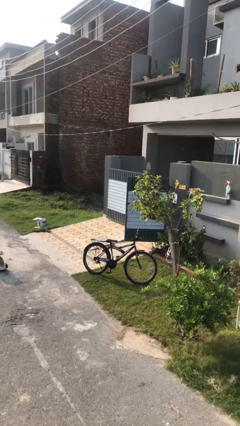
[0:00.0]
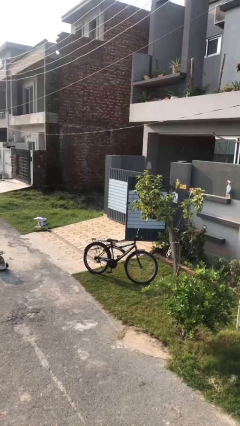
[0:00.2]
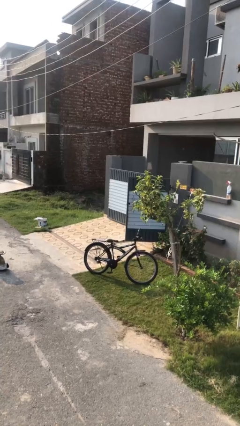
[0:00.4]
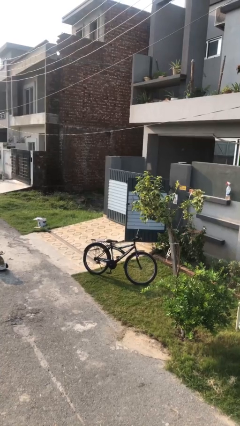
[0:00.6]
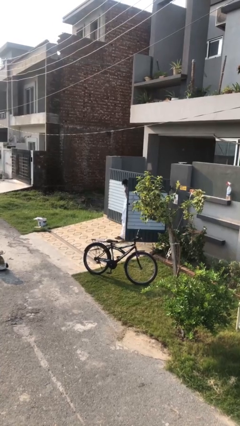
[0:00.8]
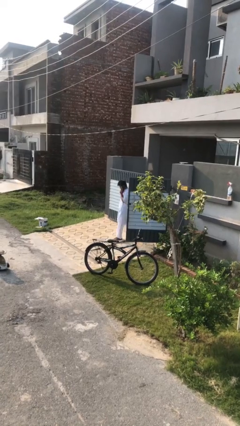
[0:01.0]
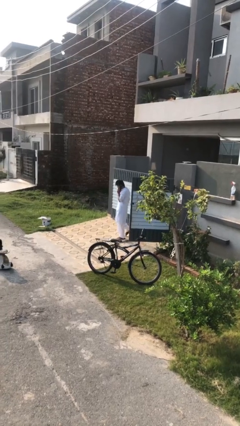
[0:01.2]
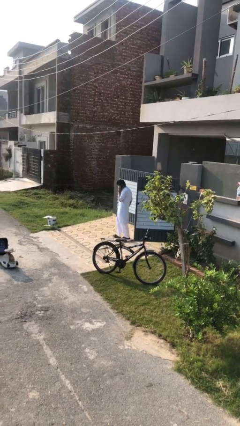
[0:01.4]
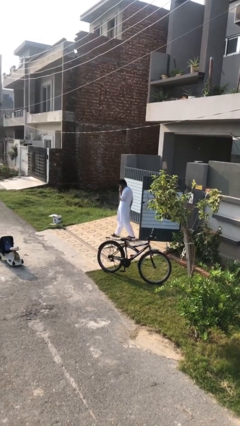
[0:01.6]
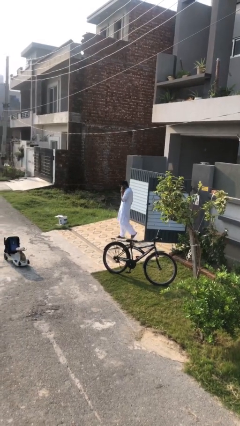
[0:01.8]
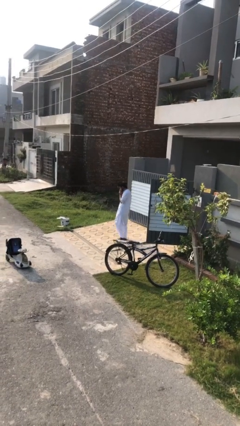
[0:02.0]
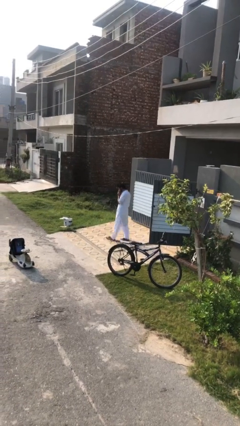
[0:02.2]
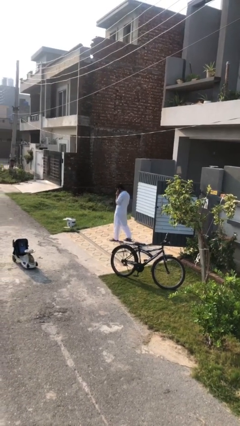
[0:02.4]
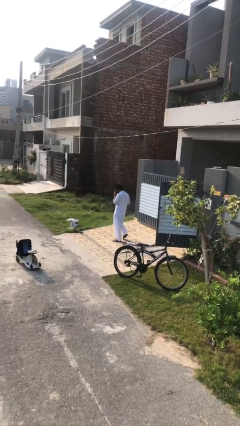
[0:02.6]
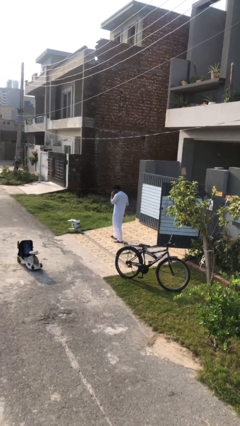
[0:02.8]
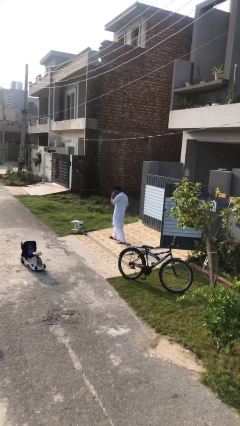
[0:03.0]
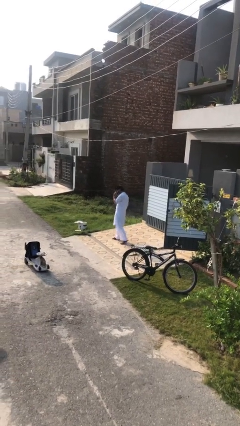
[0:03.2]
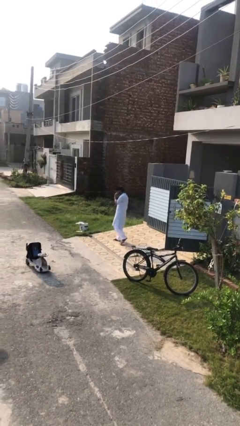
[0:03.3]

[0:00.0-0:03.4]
person enters scene through structure

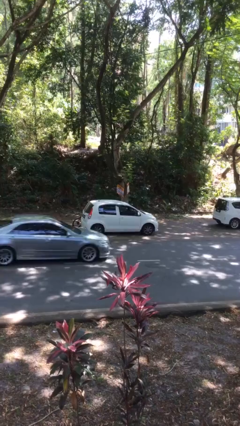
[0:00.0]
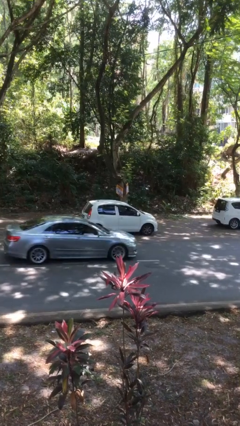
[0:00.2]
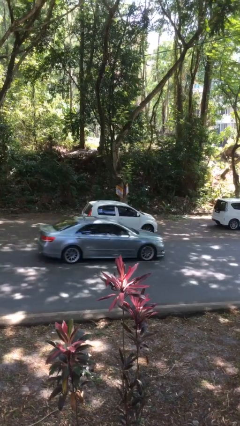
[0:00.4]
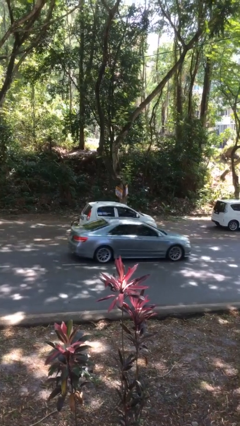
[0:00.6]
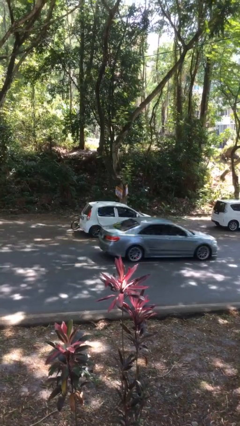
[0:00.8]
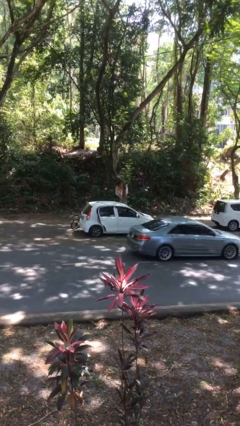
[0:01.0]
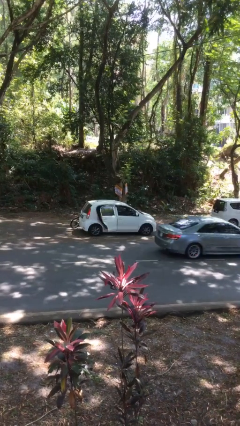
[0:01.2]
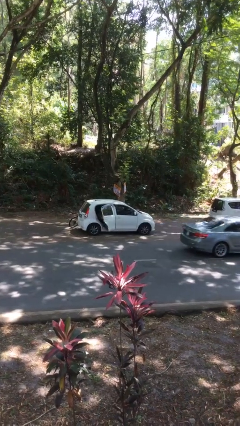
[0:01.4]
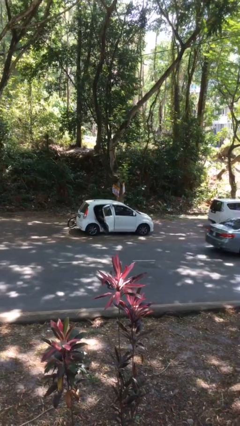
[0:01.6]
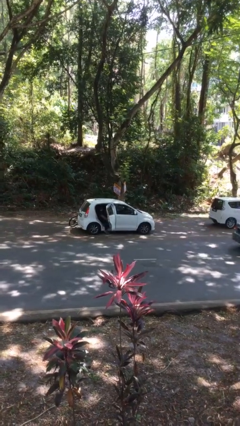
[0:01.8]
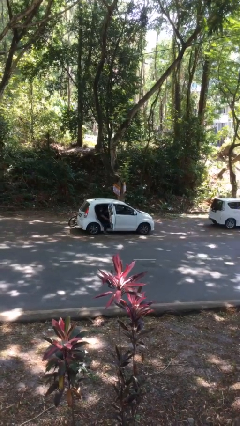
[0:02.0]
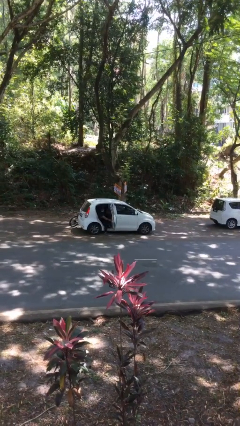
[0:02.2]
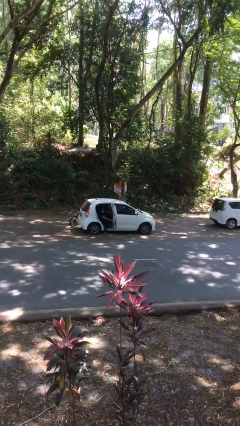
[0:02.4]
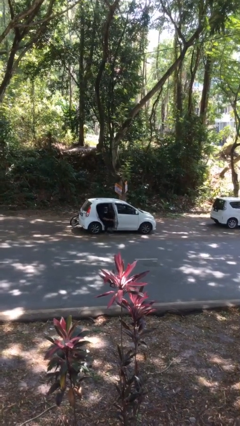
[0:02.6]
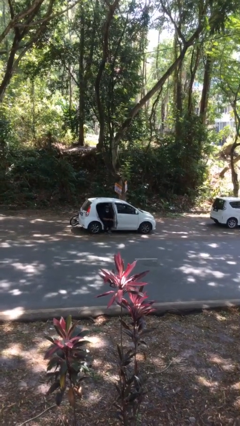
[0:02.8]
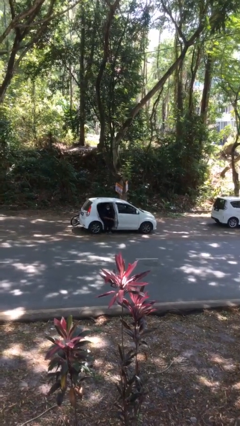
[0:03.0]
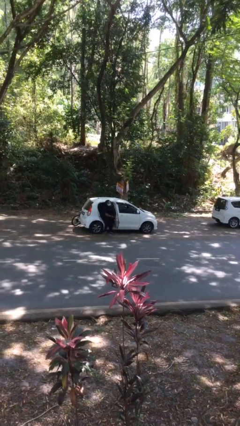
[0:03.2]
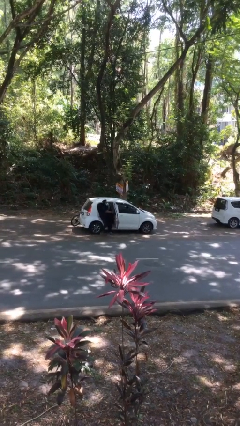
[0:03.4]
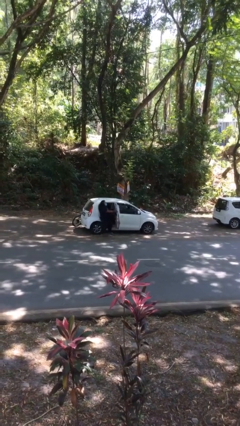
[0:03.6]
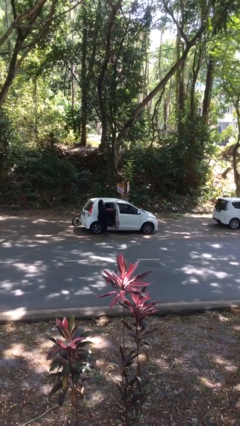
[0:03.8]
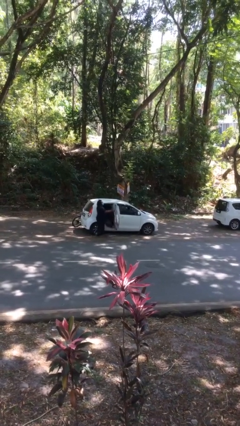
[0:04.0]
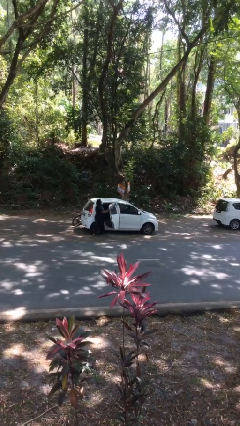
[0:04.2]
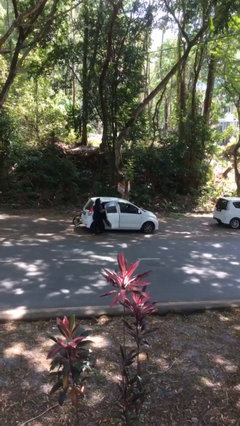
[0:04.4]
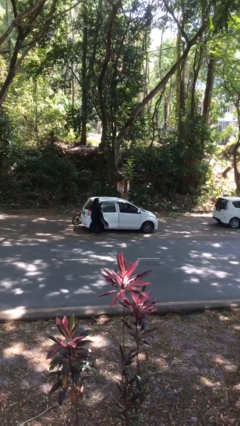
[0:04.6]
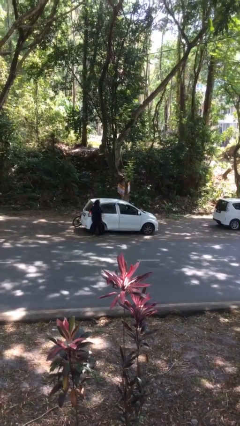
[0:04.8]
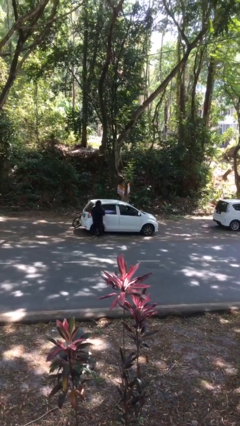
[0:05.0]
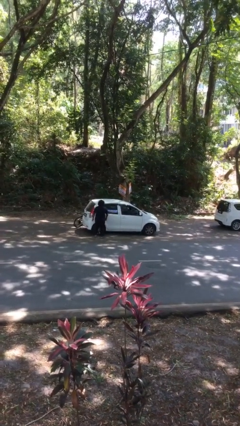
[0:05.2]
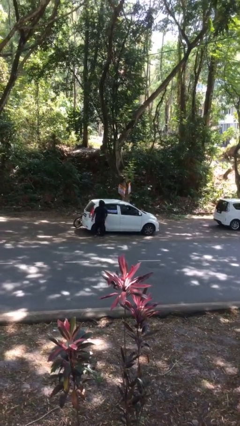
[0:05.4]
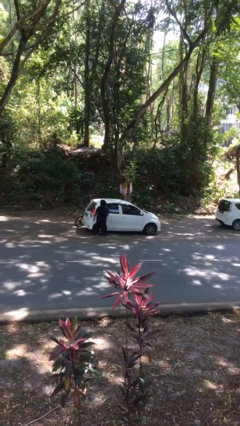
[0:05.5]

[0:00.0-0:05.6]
car drops off person

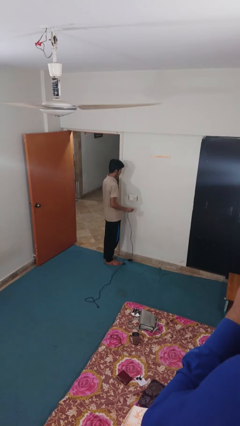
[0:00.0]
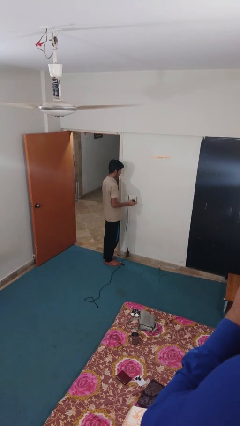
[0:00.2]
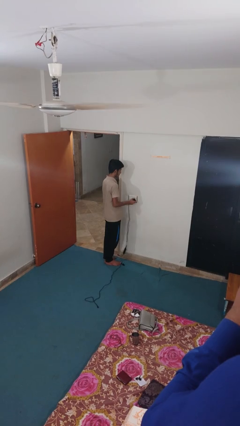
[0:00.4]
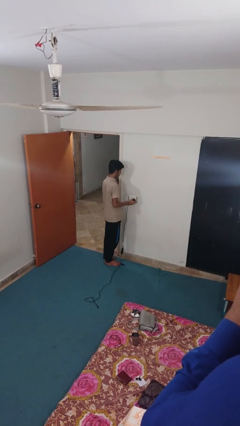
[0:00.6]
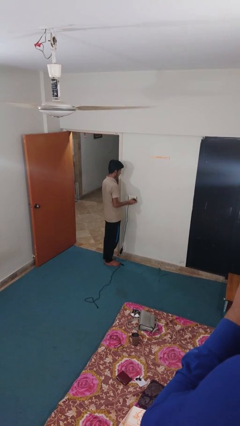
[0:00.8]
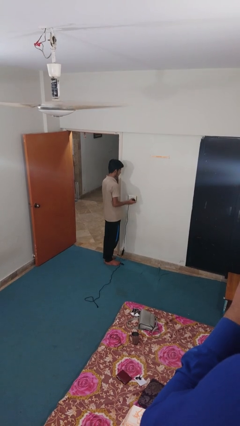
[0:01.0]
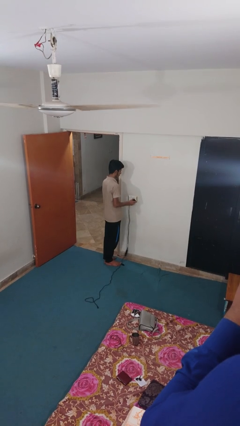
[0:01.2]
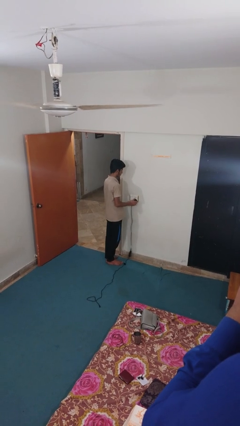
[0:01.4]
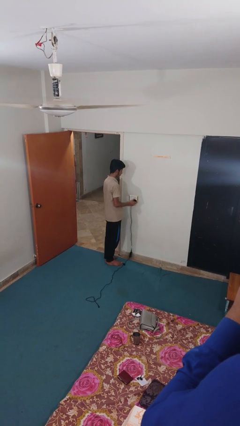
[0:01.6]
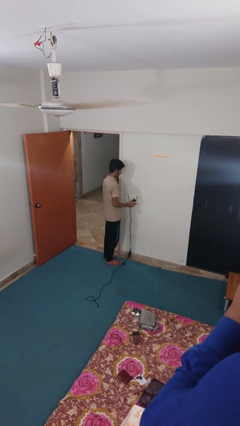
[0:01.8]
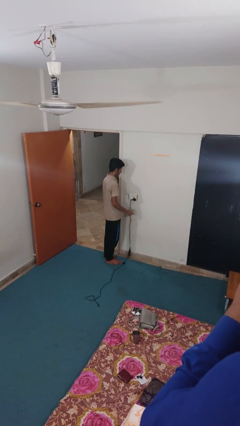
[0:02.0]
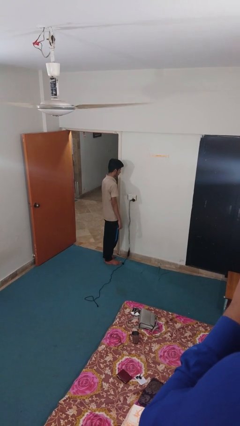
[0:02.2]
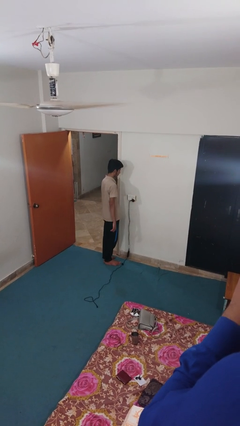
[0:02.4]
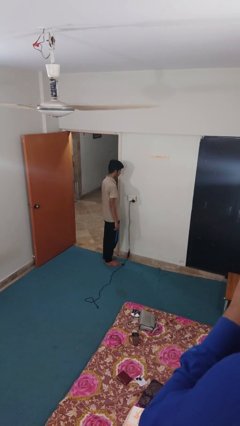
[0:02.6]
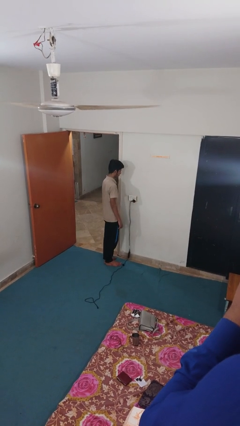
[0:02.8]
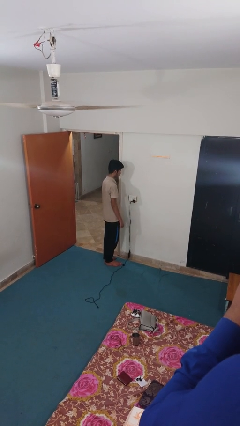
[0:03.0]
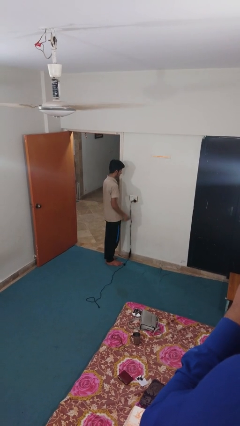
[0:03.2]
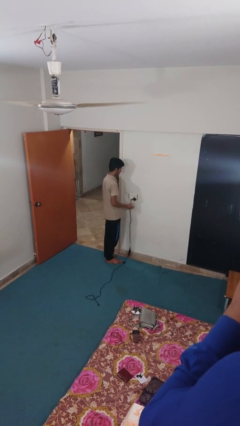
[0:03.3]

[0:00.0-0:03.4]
person plugs into electrical socket

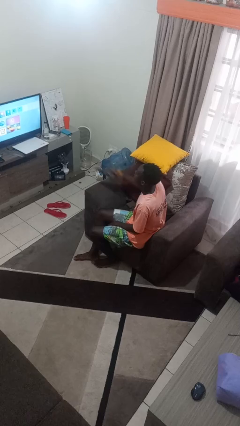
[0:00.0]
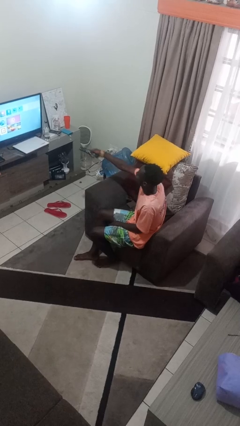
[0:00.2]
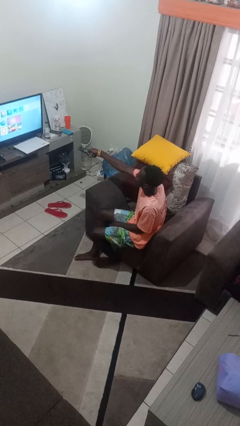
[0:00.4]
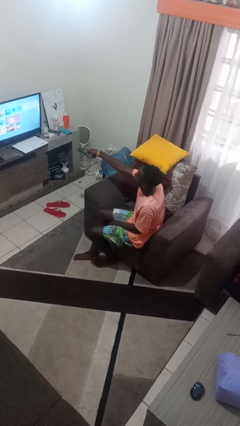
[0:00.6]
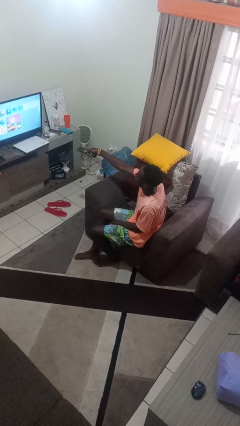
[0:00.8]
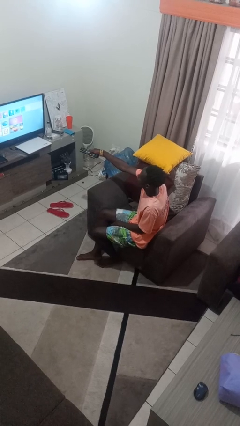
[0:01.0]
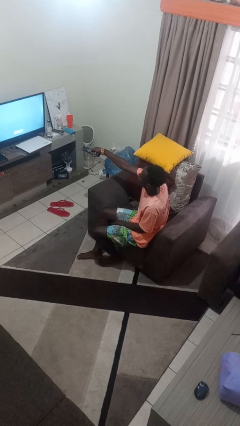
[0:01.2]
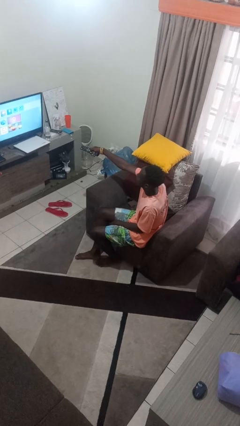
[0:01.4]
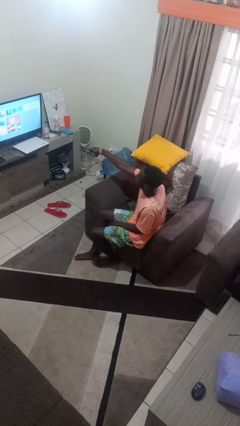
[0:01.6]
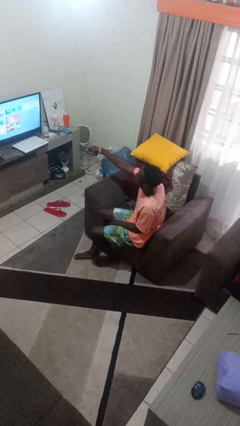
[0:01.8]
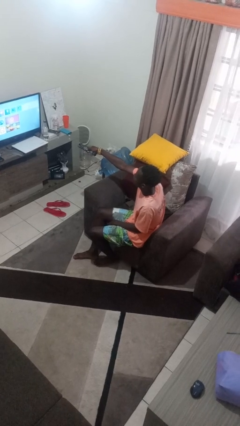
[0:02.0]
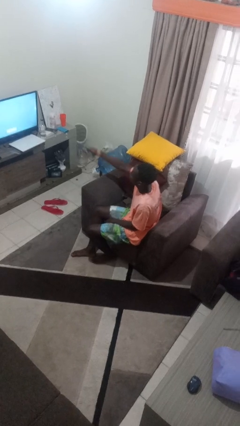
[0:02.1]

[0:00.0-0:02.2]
person uses television remote

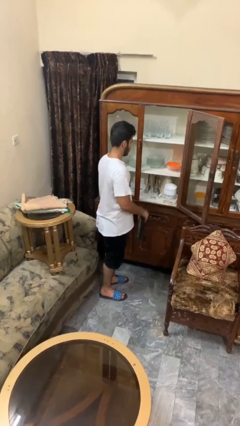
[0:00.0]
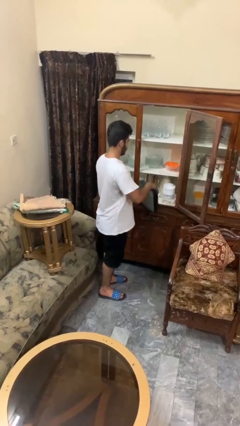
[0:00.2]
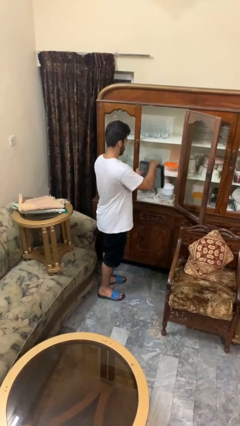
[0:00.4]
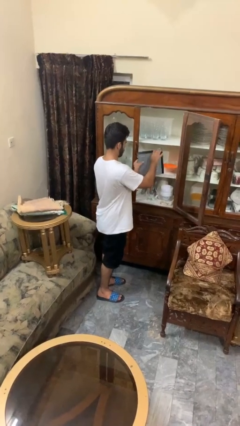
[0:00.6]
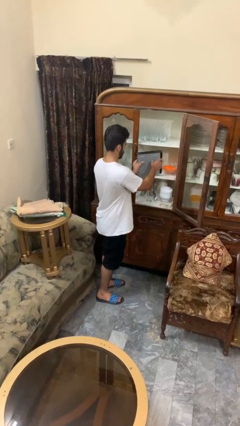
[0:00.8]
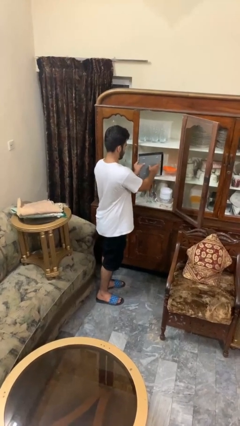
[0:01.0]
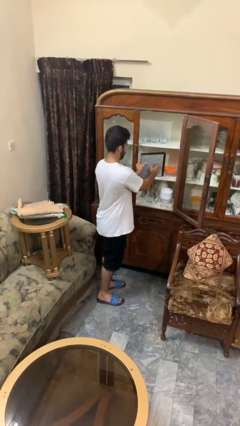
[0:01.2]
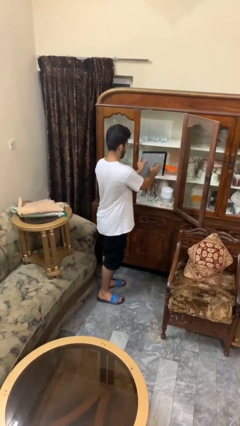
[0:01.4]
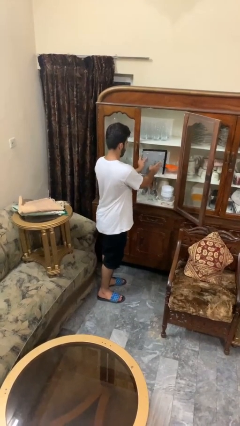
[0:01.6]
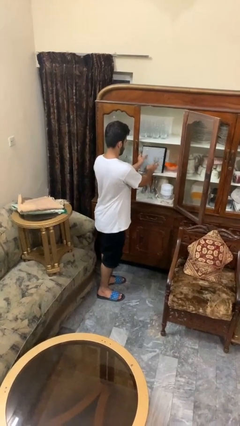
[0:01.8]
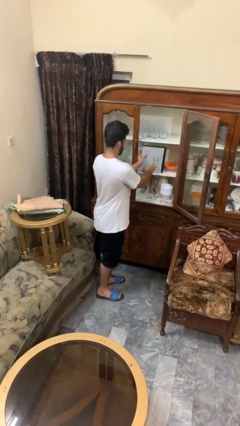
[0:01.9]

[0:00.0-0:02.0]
person puts down object into cabinet

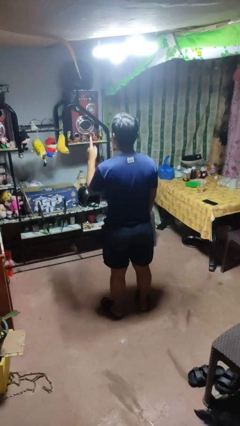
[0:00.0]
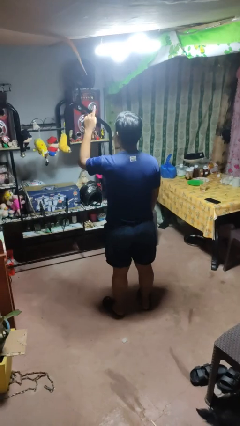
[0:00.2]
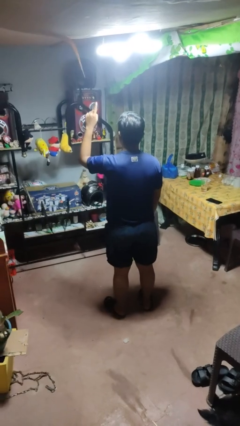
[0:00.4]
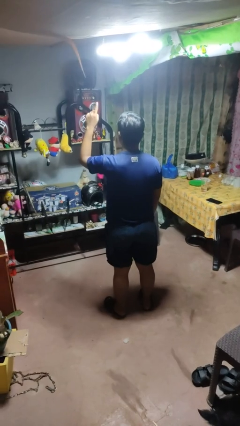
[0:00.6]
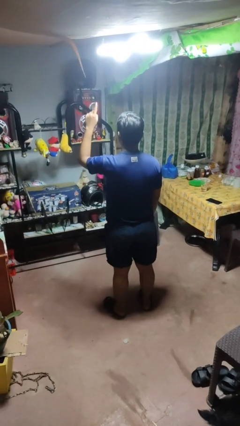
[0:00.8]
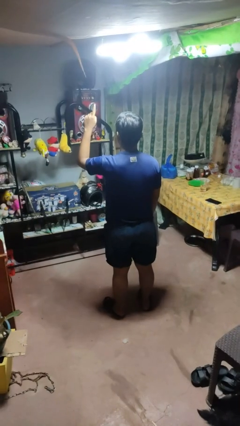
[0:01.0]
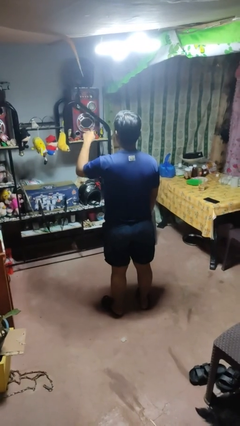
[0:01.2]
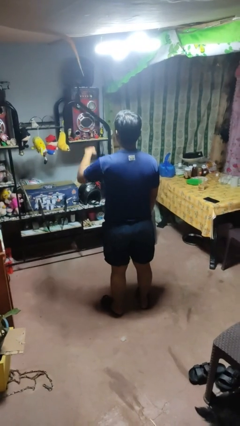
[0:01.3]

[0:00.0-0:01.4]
person gestures number one
